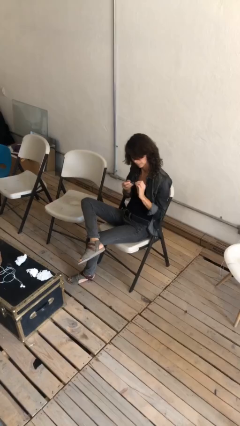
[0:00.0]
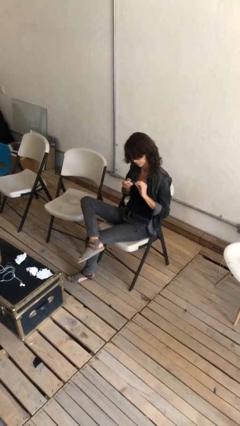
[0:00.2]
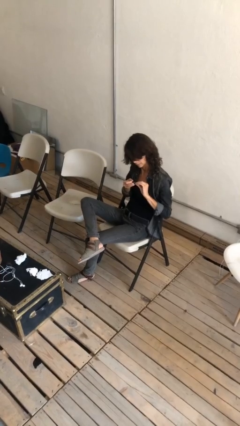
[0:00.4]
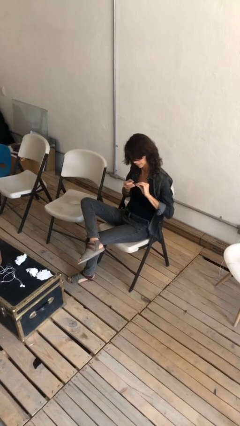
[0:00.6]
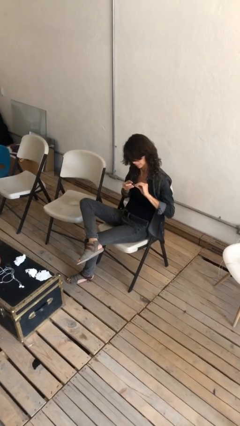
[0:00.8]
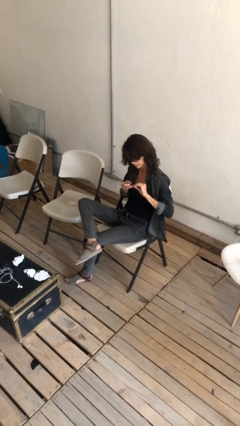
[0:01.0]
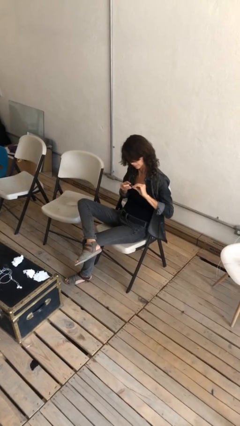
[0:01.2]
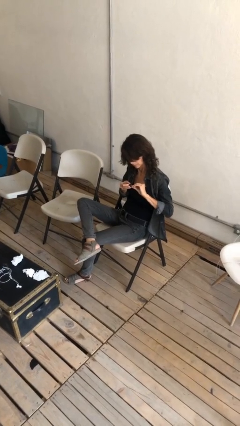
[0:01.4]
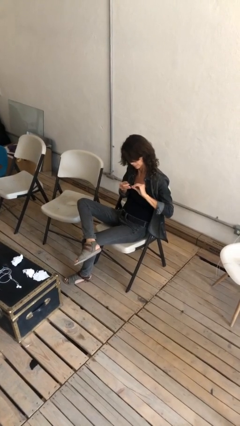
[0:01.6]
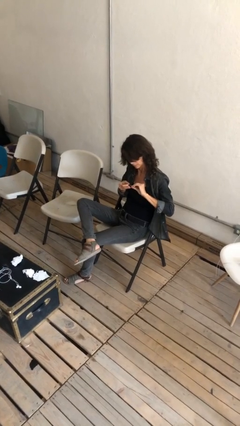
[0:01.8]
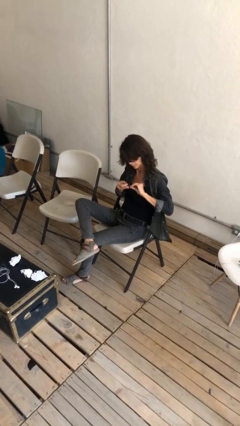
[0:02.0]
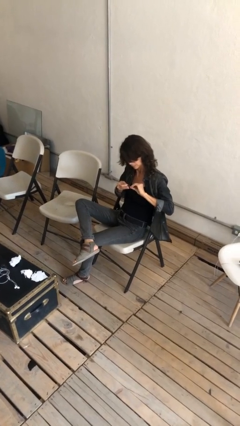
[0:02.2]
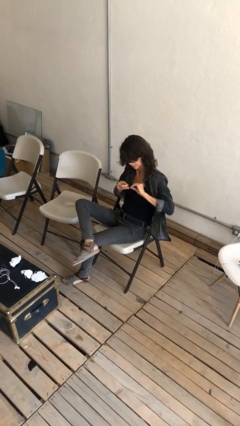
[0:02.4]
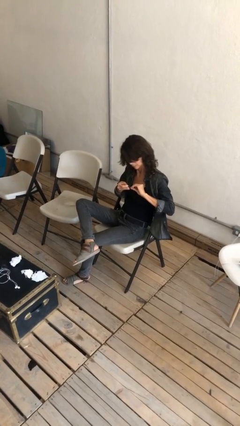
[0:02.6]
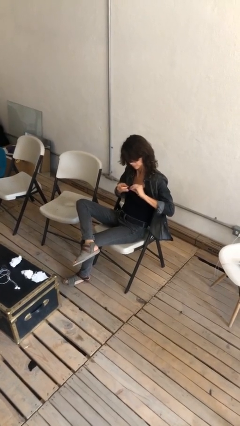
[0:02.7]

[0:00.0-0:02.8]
person clips fingernails

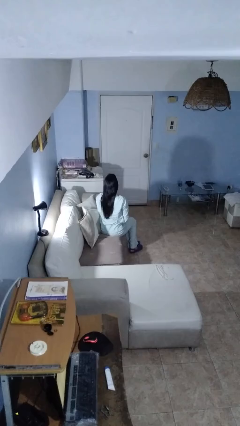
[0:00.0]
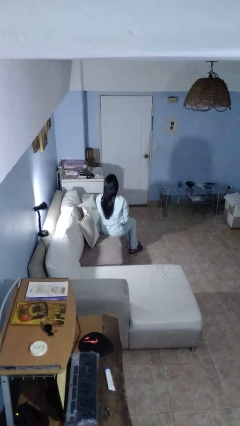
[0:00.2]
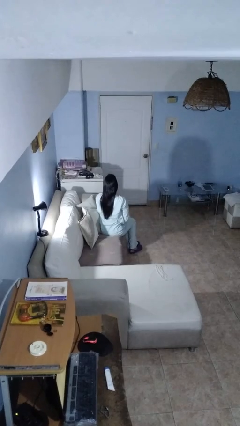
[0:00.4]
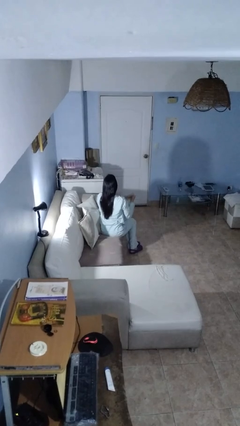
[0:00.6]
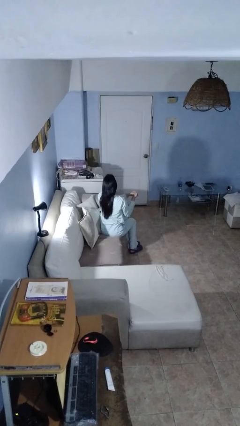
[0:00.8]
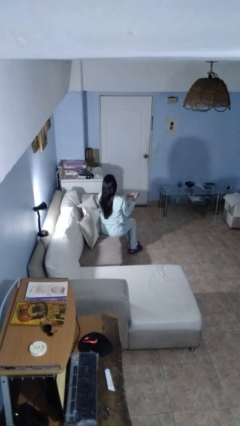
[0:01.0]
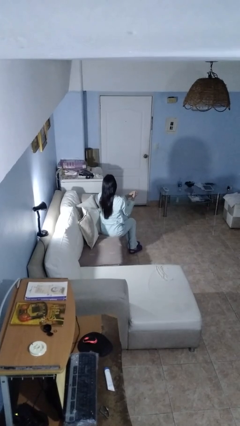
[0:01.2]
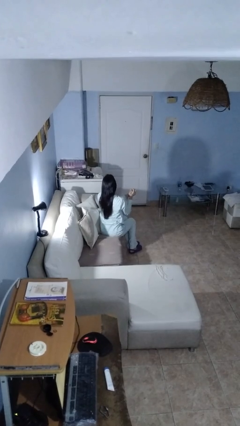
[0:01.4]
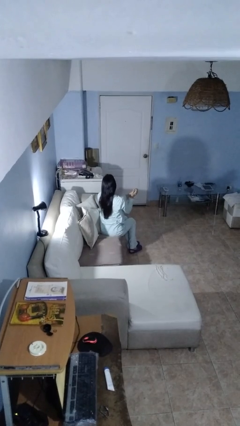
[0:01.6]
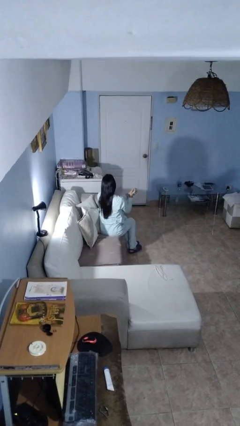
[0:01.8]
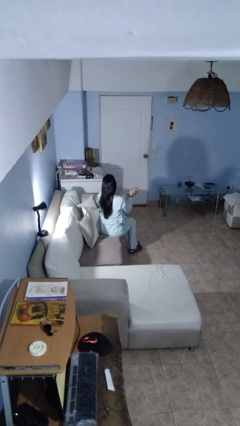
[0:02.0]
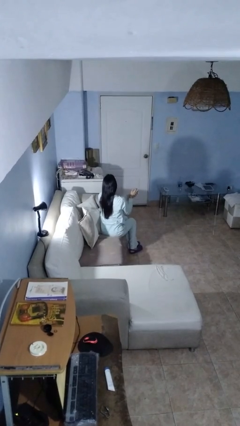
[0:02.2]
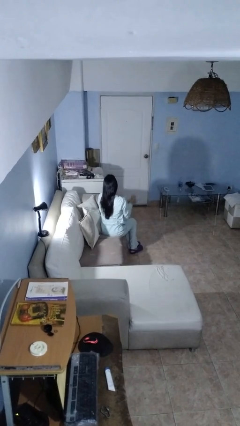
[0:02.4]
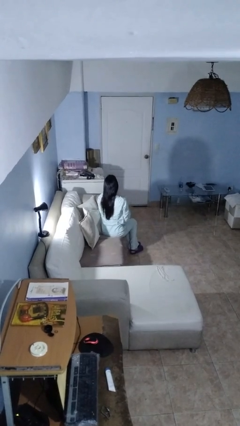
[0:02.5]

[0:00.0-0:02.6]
person snaps fingers

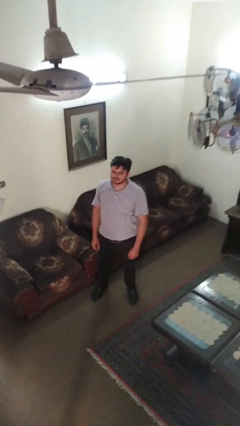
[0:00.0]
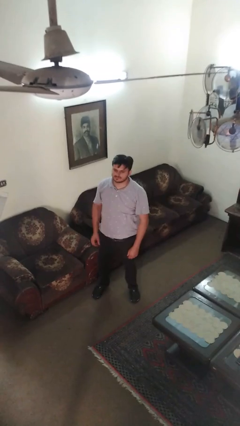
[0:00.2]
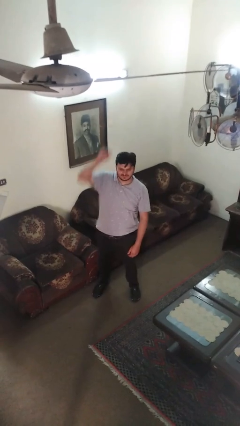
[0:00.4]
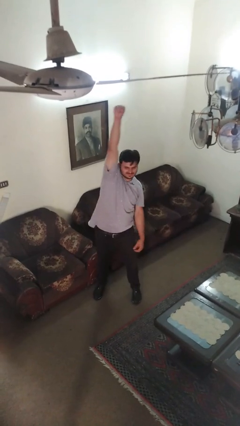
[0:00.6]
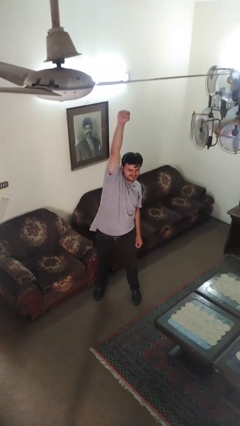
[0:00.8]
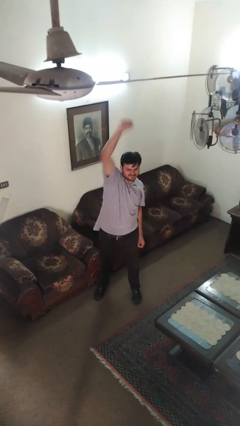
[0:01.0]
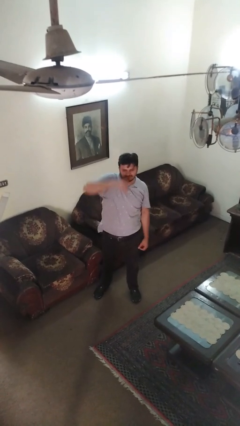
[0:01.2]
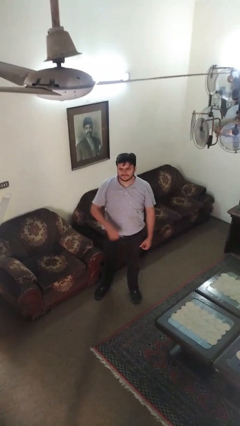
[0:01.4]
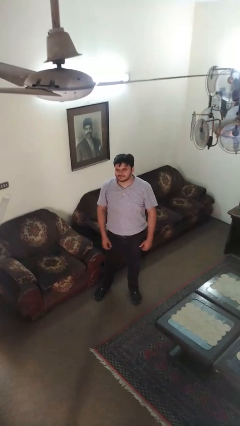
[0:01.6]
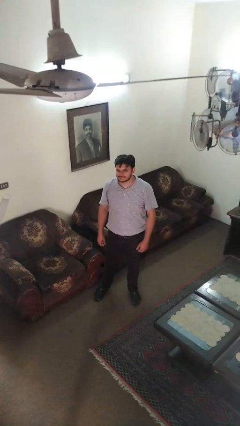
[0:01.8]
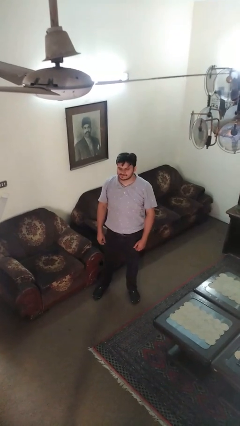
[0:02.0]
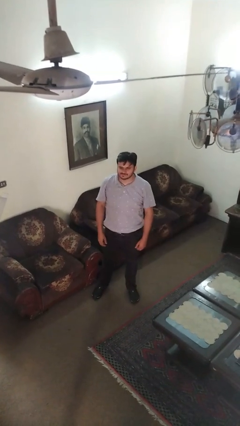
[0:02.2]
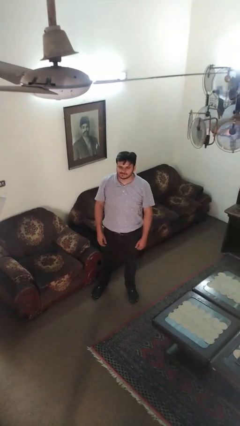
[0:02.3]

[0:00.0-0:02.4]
person punches

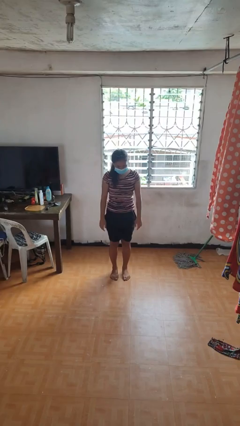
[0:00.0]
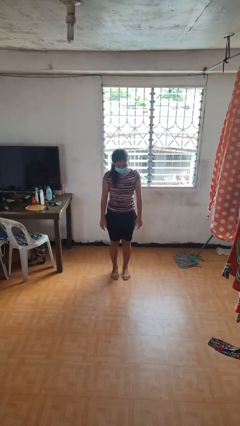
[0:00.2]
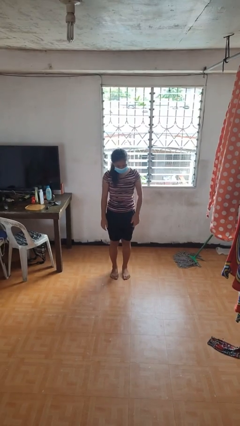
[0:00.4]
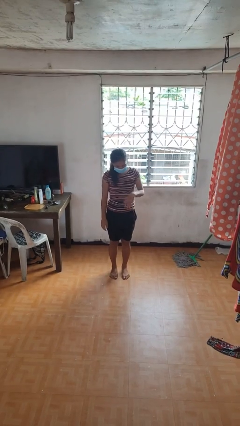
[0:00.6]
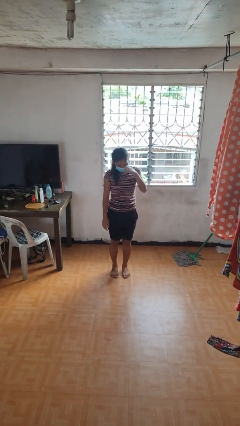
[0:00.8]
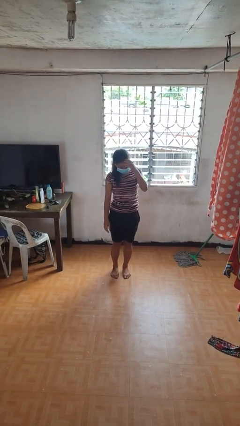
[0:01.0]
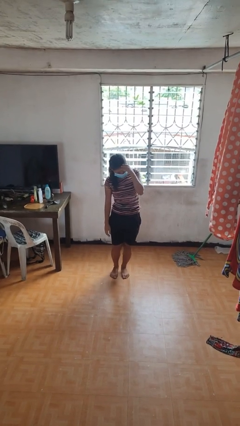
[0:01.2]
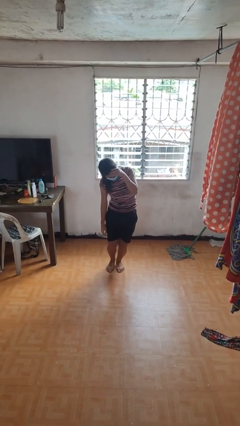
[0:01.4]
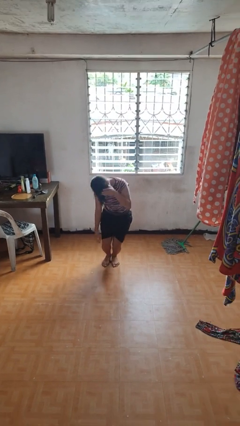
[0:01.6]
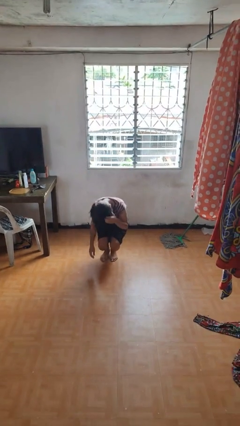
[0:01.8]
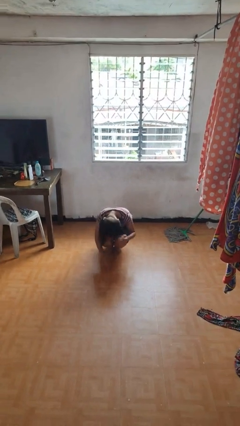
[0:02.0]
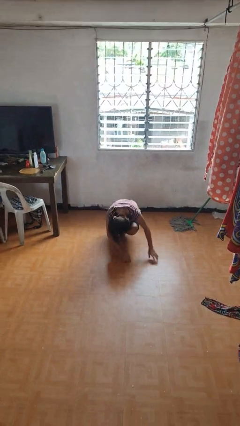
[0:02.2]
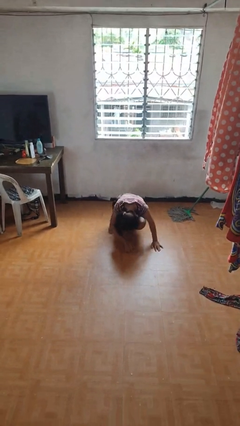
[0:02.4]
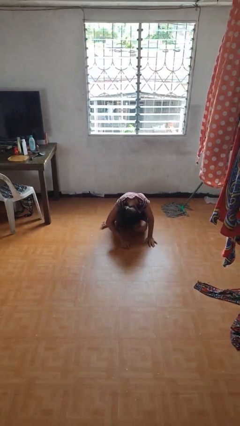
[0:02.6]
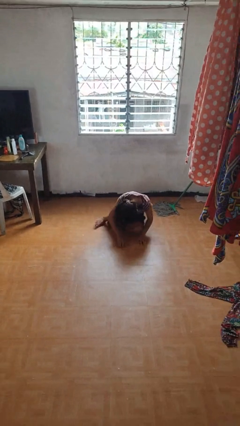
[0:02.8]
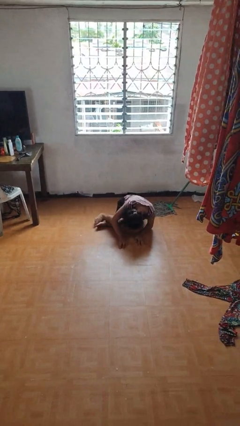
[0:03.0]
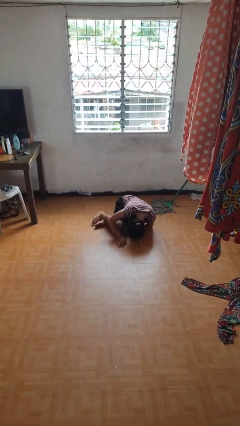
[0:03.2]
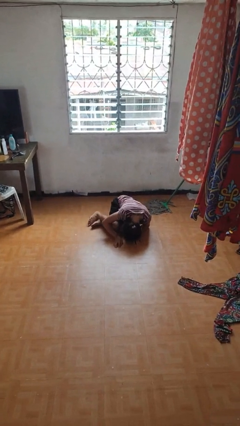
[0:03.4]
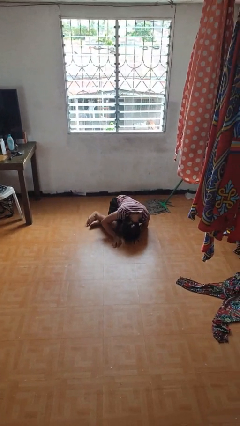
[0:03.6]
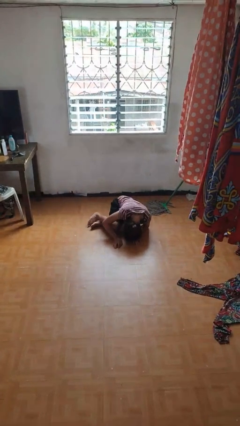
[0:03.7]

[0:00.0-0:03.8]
person falls while standing

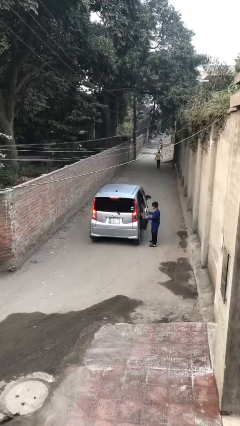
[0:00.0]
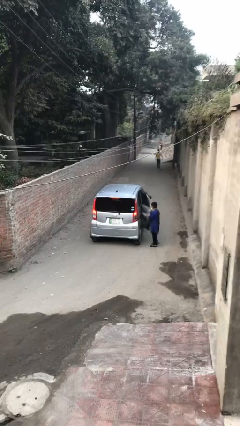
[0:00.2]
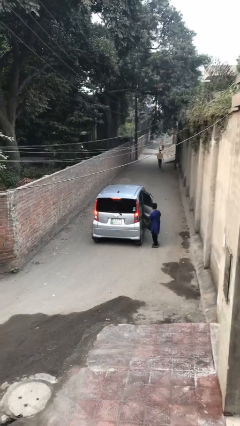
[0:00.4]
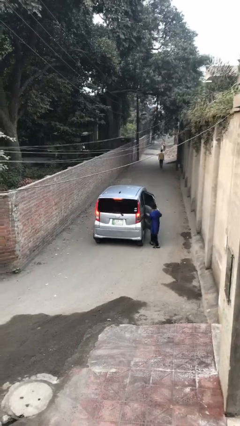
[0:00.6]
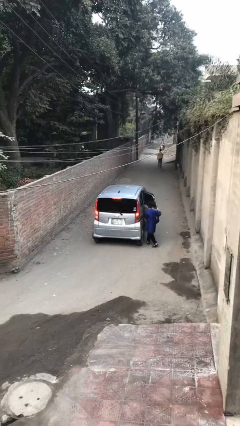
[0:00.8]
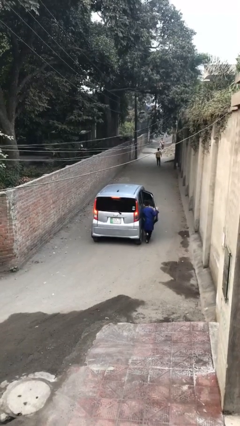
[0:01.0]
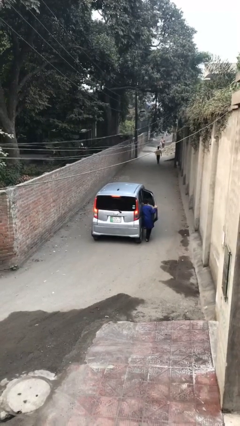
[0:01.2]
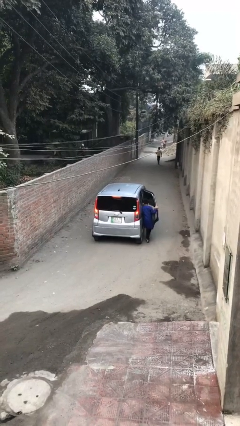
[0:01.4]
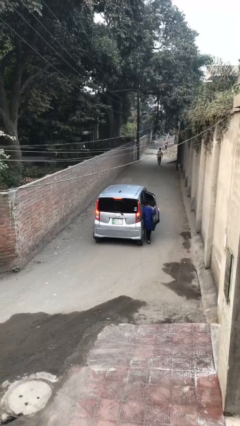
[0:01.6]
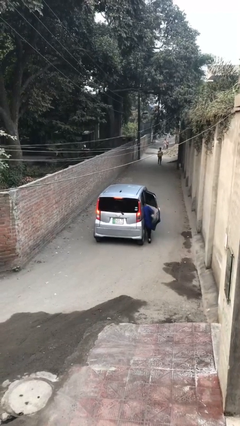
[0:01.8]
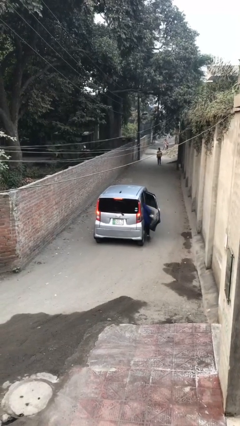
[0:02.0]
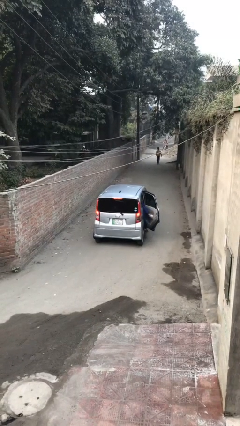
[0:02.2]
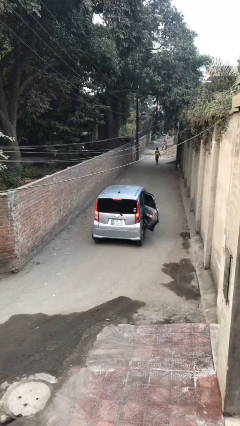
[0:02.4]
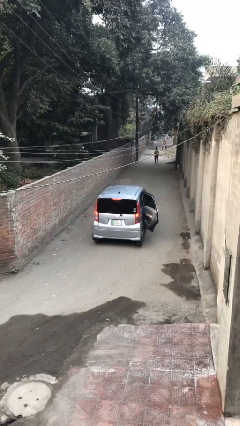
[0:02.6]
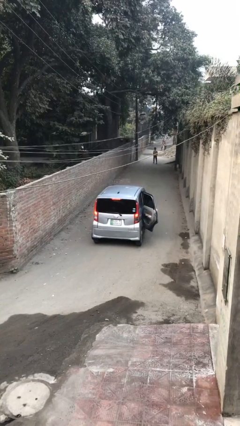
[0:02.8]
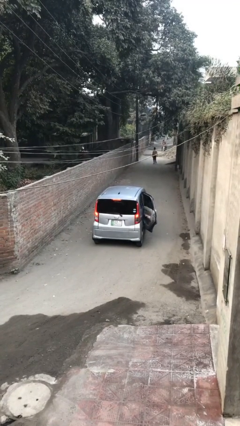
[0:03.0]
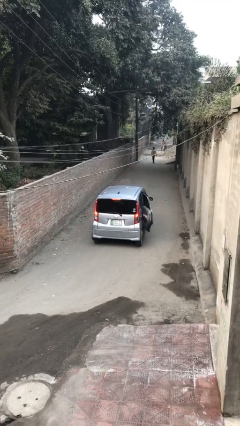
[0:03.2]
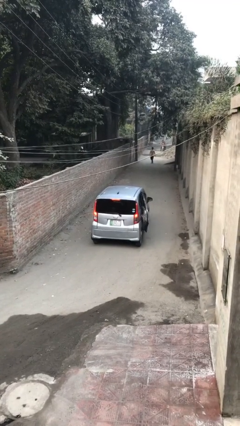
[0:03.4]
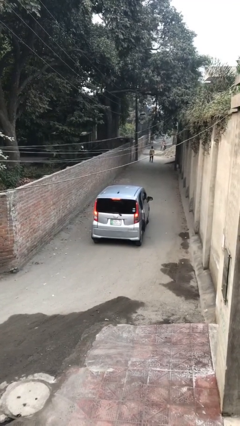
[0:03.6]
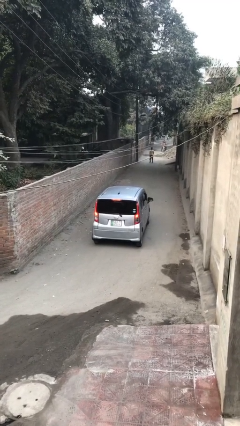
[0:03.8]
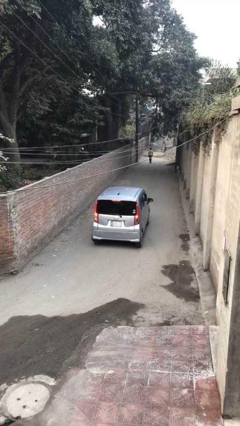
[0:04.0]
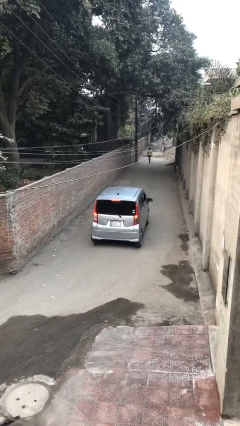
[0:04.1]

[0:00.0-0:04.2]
car picks up person

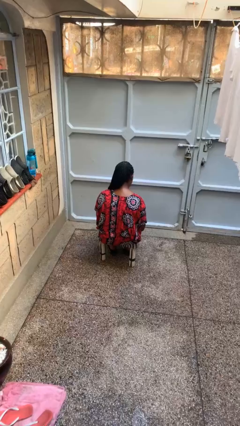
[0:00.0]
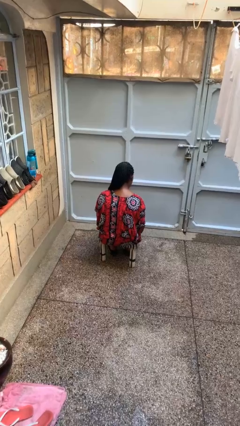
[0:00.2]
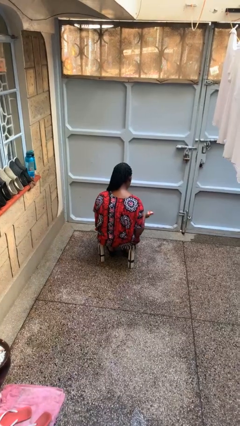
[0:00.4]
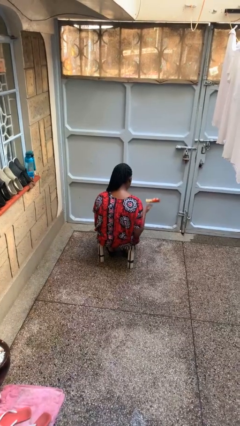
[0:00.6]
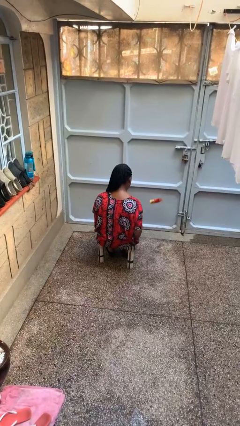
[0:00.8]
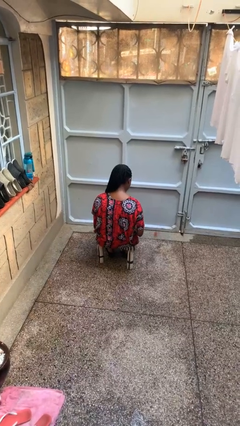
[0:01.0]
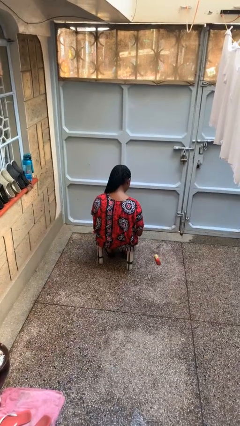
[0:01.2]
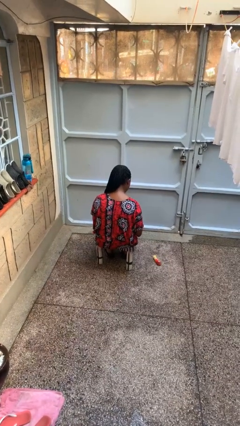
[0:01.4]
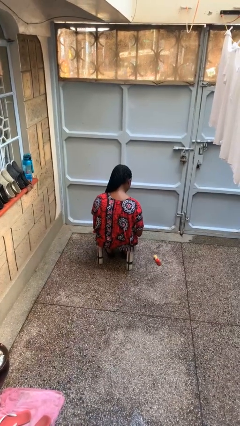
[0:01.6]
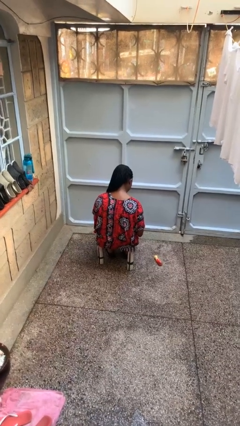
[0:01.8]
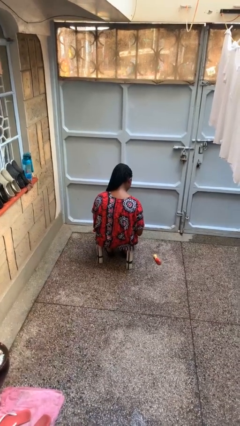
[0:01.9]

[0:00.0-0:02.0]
person throws object into air
